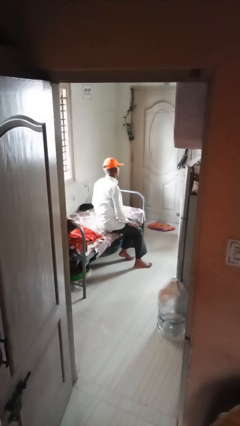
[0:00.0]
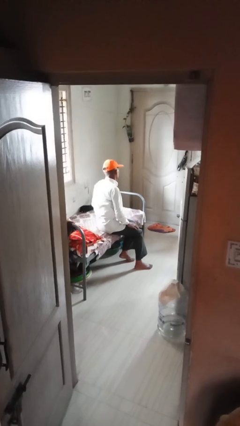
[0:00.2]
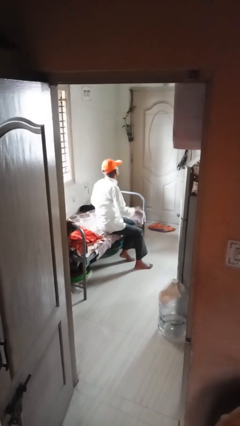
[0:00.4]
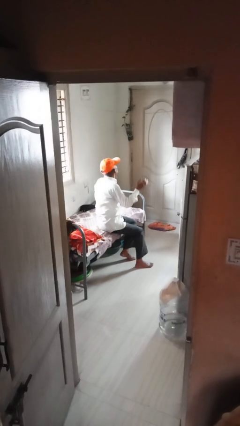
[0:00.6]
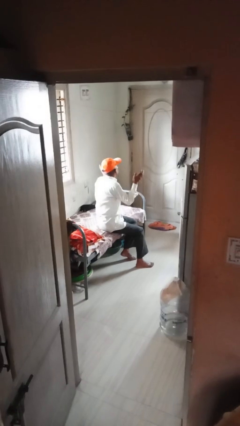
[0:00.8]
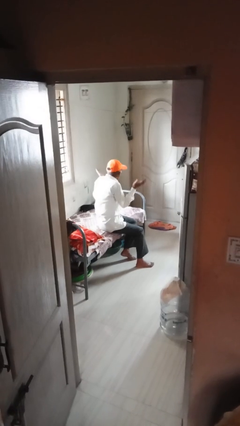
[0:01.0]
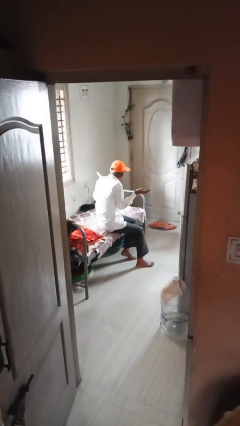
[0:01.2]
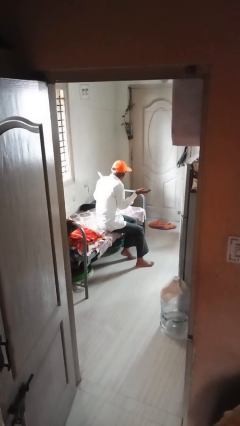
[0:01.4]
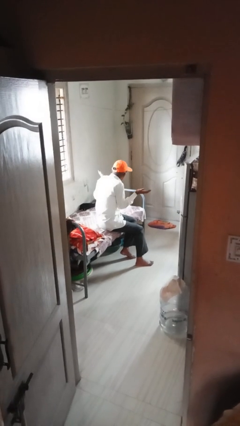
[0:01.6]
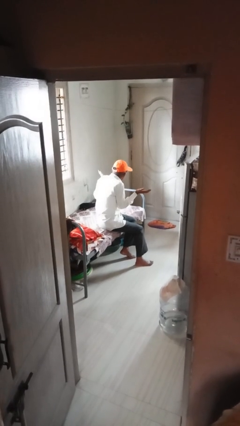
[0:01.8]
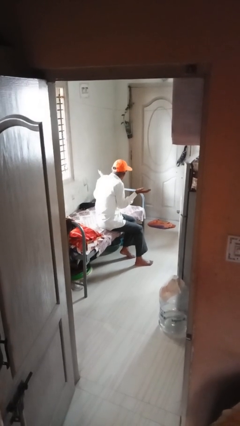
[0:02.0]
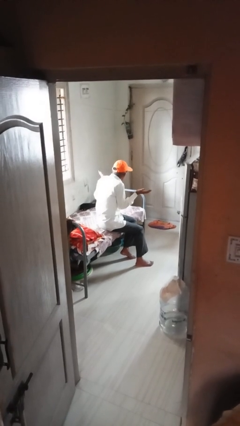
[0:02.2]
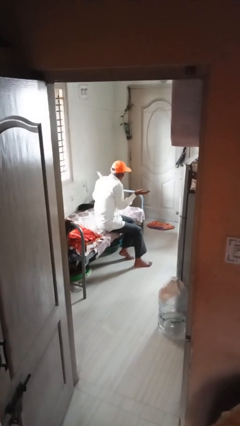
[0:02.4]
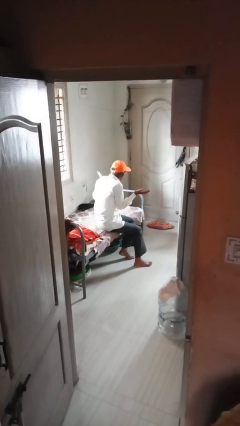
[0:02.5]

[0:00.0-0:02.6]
person shrugs

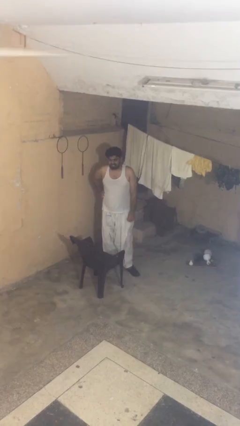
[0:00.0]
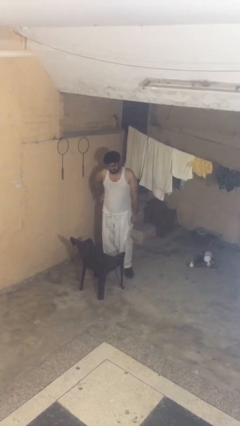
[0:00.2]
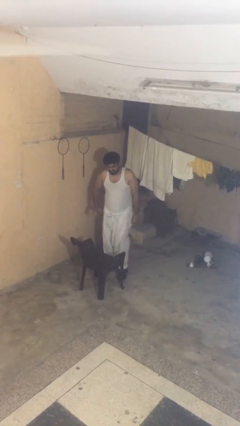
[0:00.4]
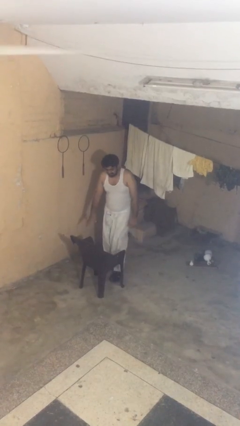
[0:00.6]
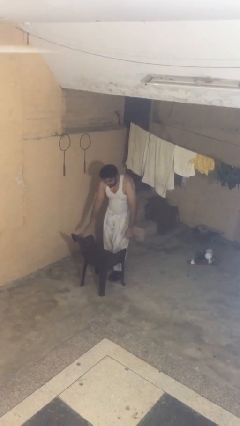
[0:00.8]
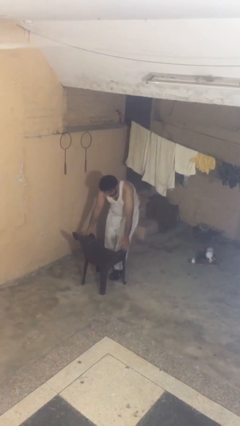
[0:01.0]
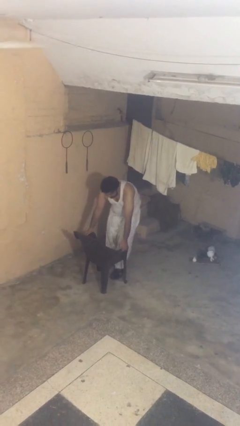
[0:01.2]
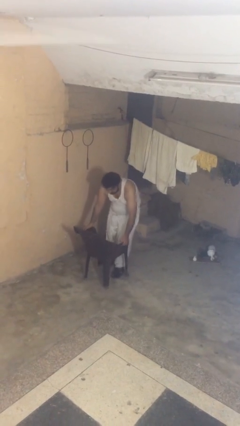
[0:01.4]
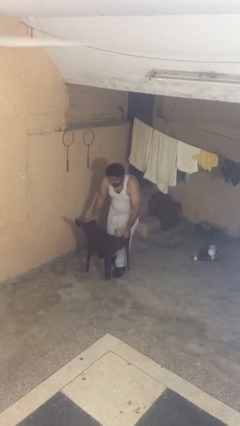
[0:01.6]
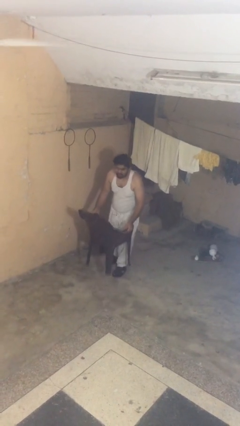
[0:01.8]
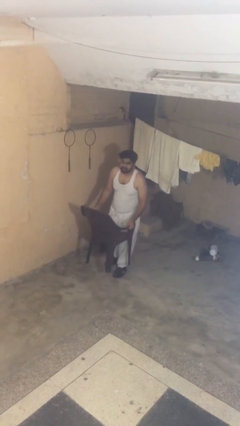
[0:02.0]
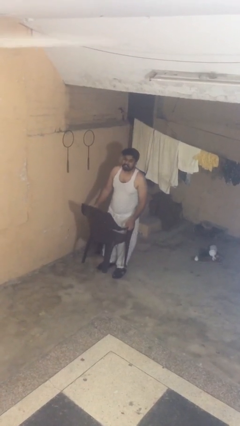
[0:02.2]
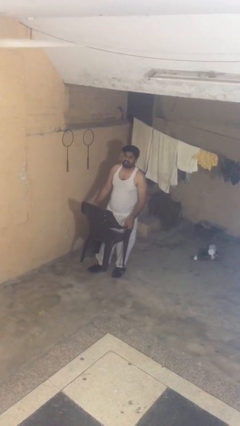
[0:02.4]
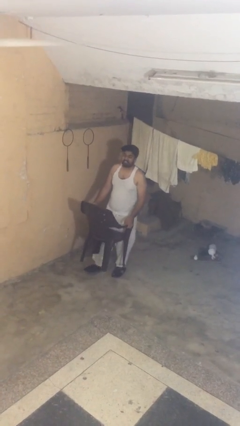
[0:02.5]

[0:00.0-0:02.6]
person picks up object from floor

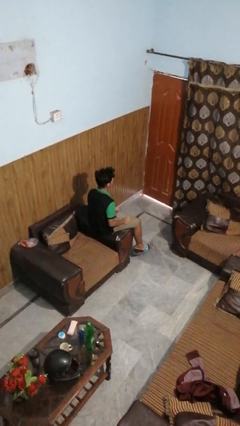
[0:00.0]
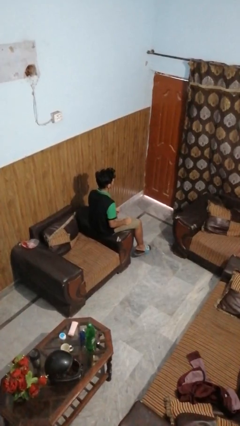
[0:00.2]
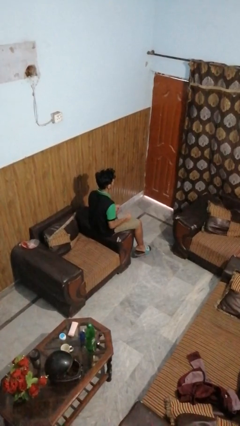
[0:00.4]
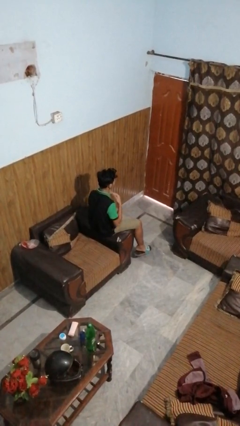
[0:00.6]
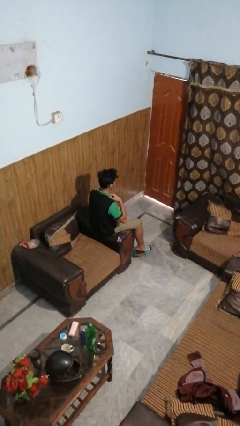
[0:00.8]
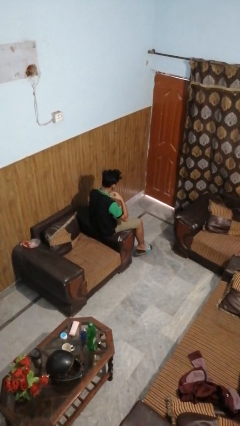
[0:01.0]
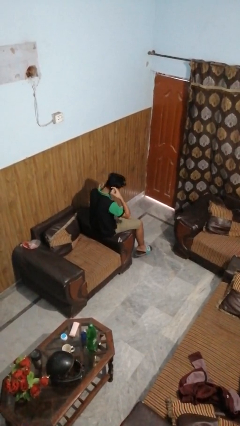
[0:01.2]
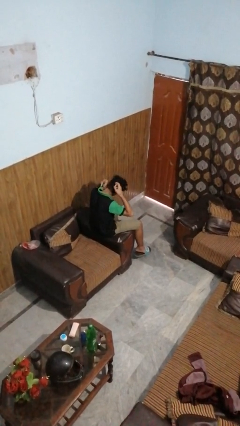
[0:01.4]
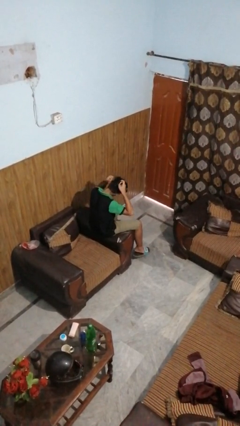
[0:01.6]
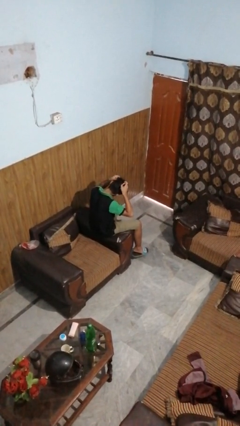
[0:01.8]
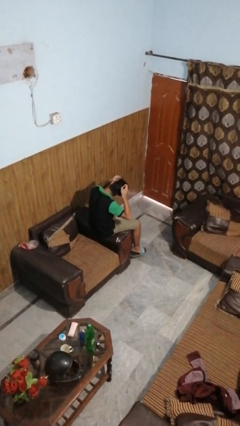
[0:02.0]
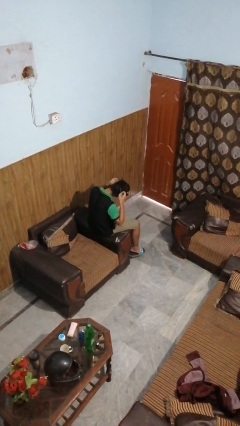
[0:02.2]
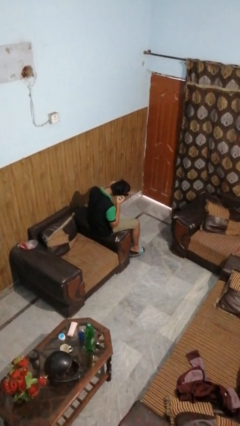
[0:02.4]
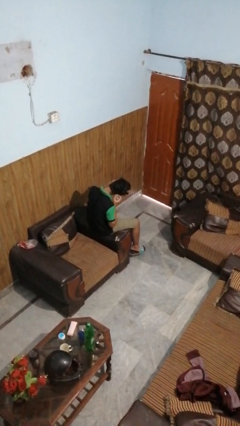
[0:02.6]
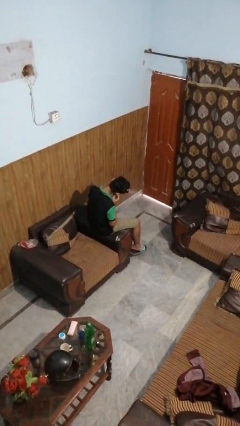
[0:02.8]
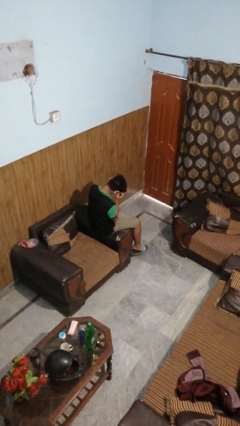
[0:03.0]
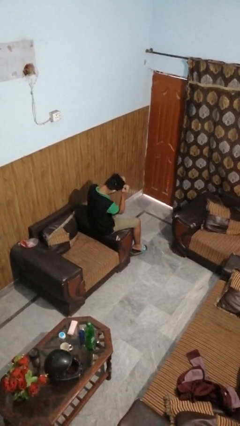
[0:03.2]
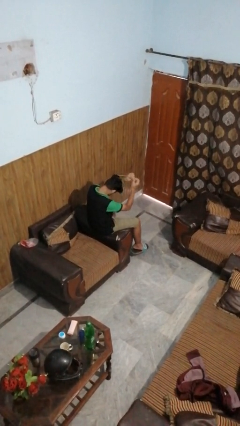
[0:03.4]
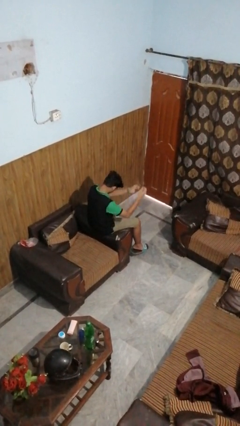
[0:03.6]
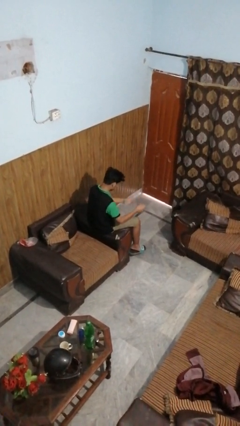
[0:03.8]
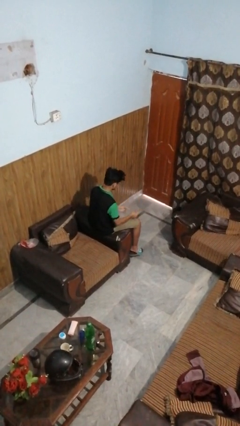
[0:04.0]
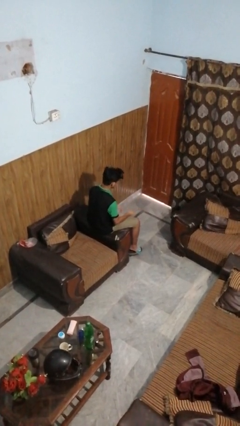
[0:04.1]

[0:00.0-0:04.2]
person takes off necklace

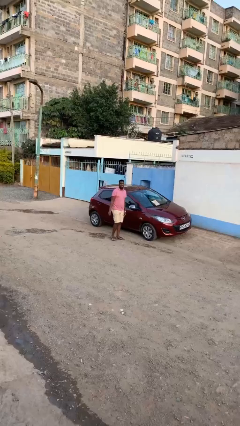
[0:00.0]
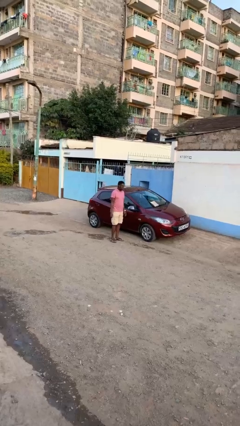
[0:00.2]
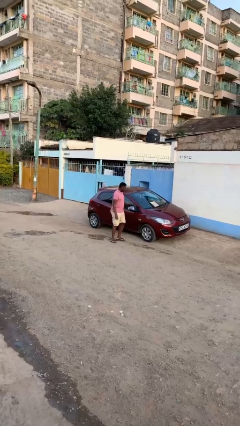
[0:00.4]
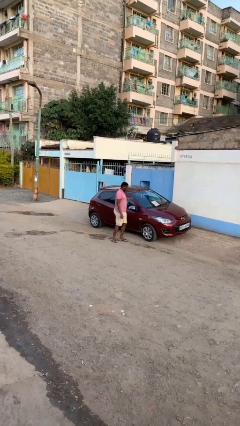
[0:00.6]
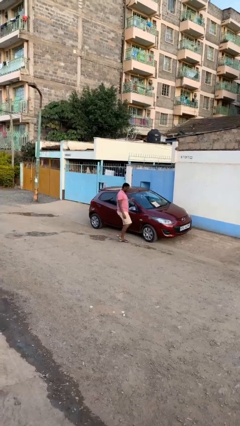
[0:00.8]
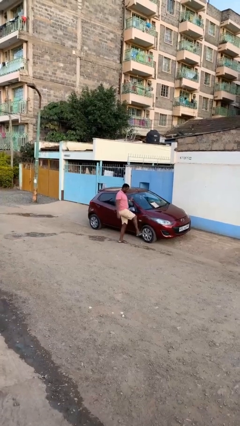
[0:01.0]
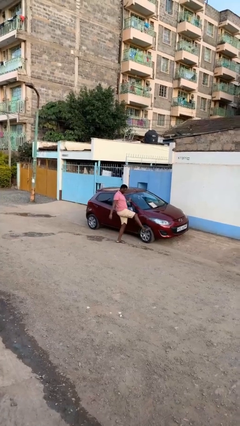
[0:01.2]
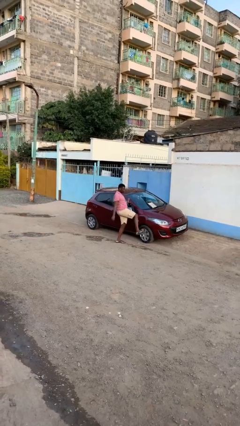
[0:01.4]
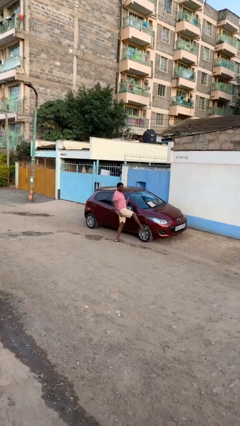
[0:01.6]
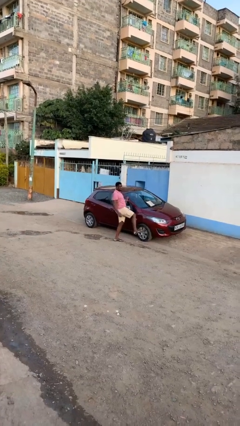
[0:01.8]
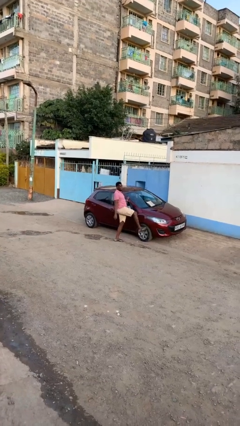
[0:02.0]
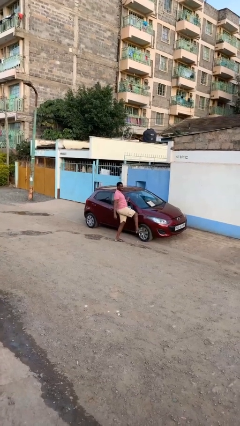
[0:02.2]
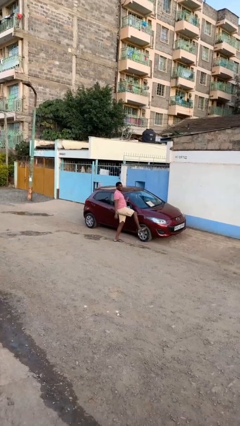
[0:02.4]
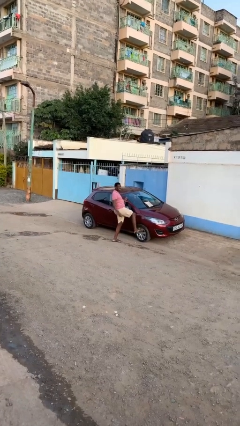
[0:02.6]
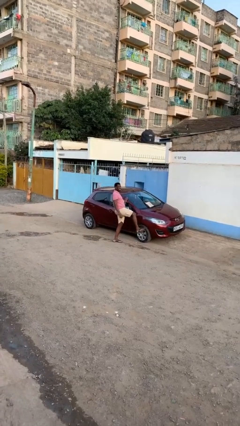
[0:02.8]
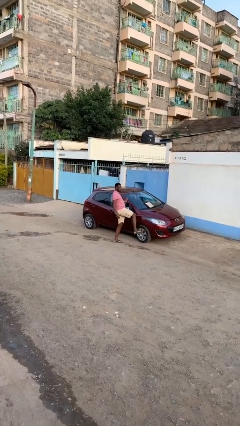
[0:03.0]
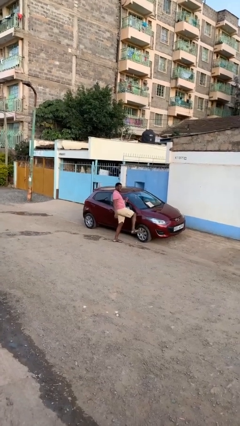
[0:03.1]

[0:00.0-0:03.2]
person kicks car tires

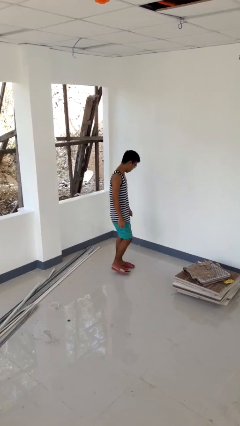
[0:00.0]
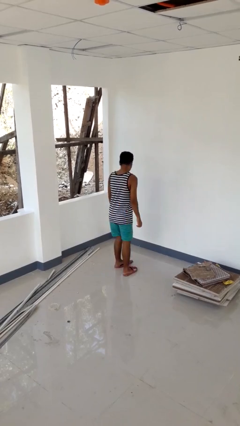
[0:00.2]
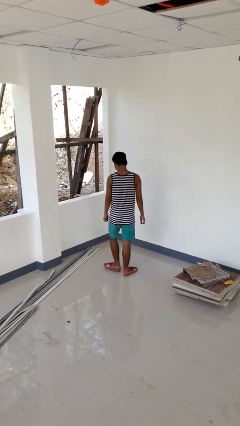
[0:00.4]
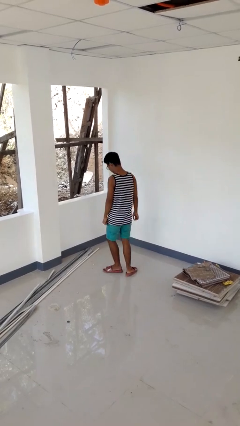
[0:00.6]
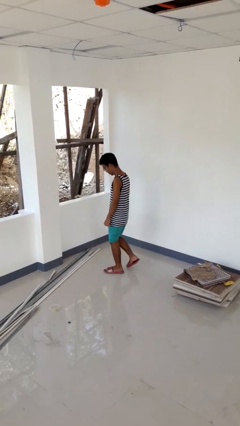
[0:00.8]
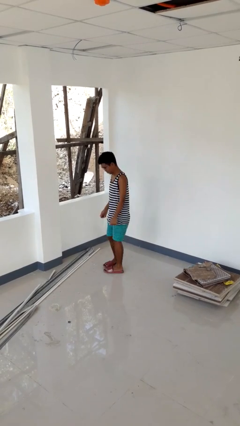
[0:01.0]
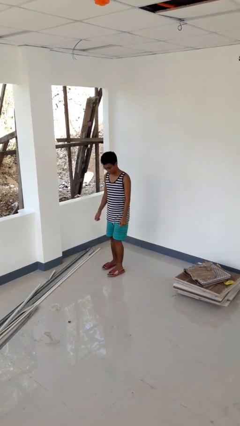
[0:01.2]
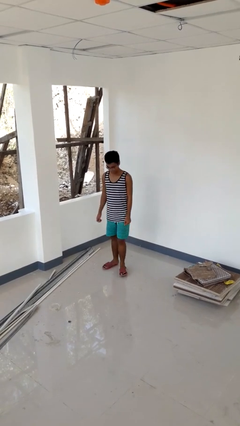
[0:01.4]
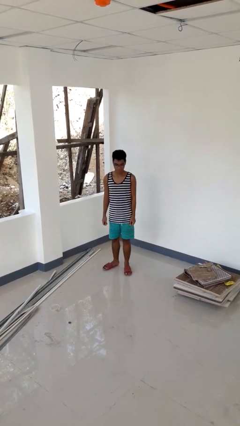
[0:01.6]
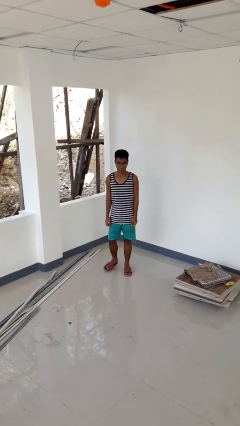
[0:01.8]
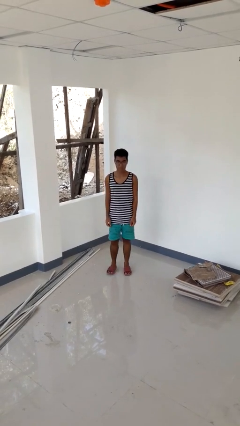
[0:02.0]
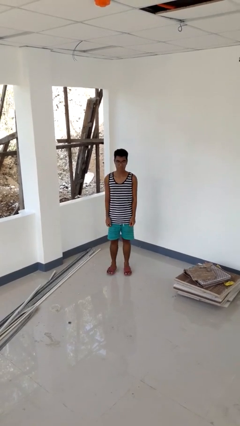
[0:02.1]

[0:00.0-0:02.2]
person twirls

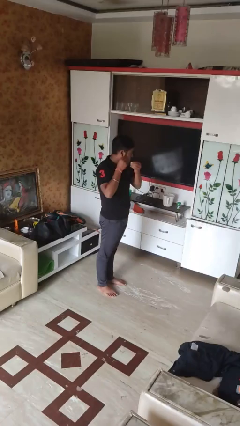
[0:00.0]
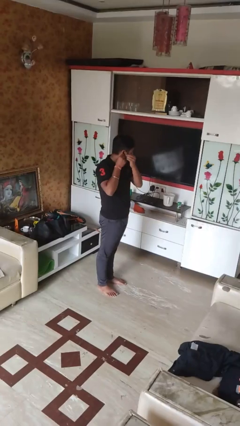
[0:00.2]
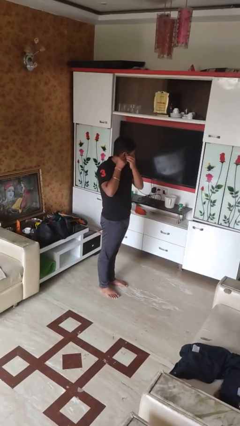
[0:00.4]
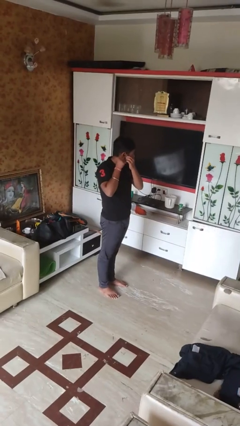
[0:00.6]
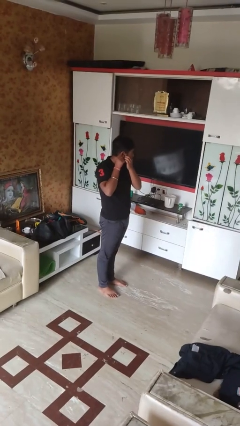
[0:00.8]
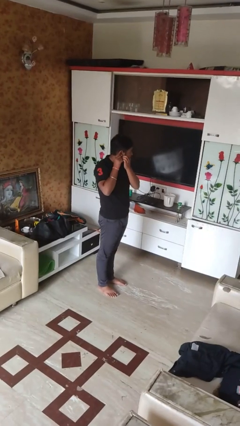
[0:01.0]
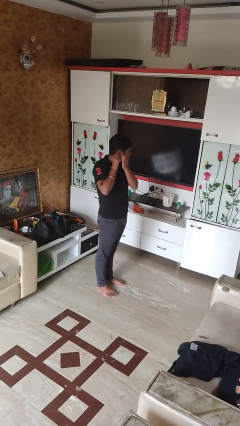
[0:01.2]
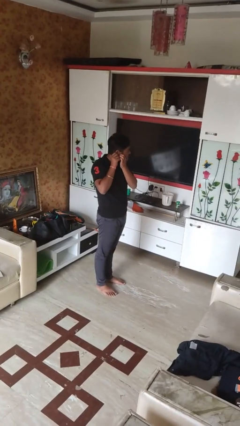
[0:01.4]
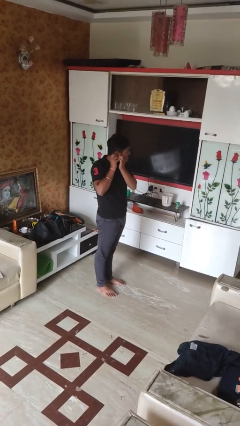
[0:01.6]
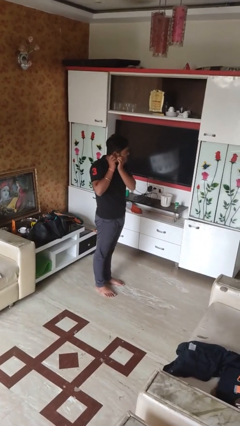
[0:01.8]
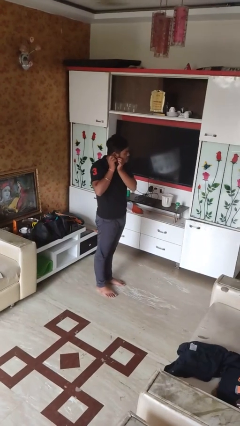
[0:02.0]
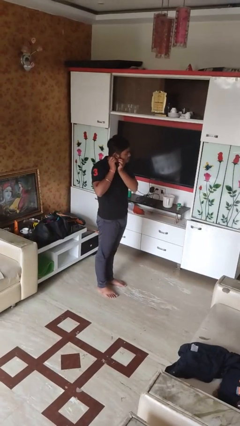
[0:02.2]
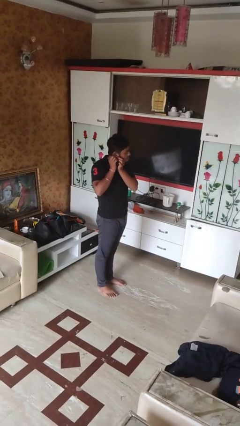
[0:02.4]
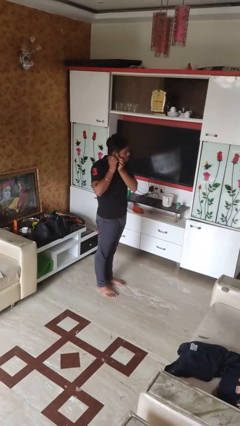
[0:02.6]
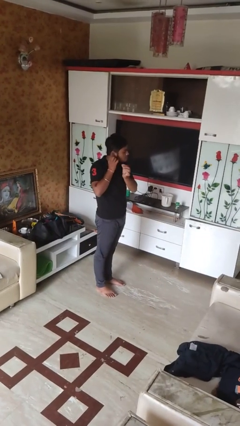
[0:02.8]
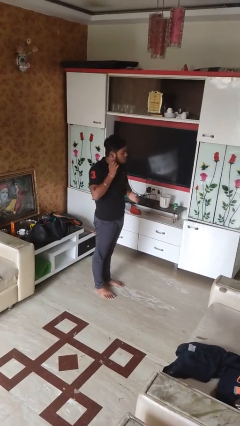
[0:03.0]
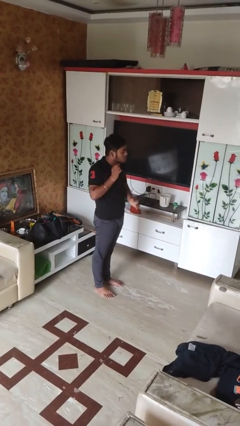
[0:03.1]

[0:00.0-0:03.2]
person puts on earrings
